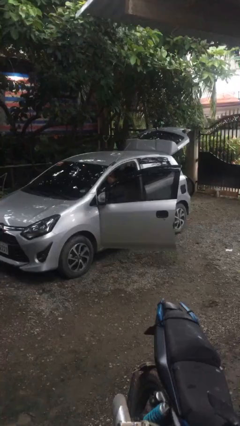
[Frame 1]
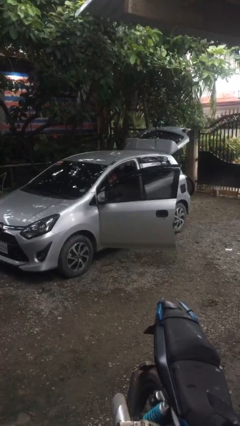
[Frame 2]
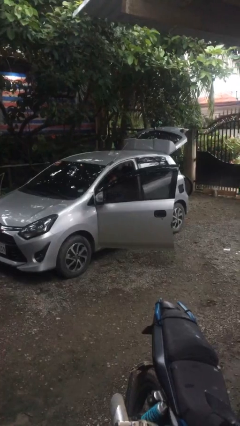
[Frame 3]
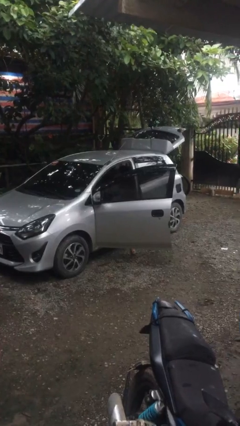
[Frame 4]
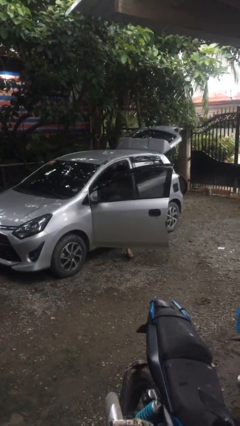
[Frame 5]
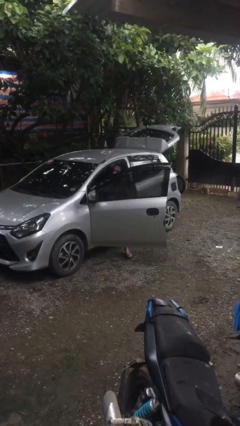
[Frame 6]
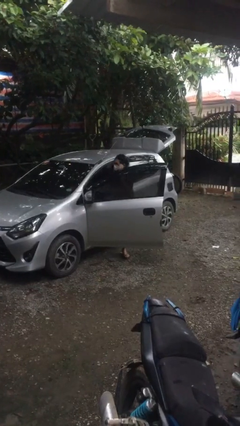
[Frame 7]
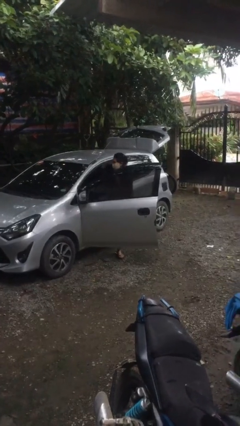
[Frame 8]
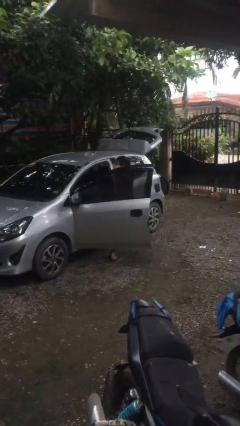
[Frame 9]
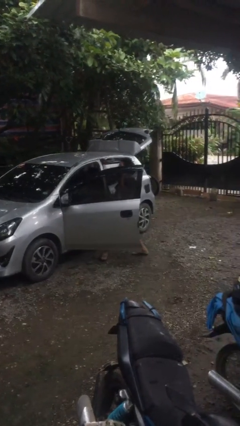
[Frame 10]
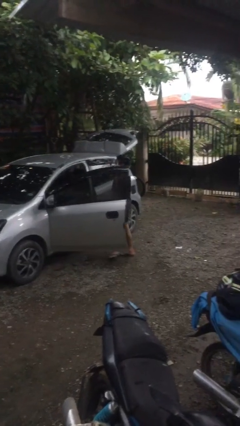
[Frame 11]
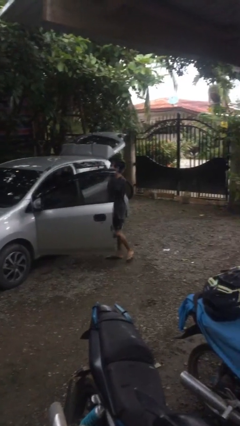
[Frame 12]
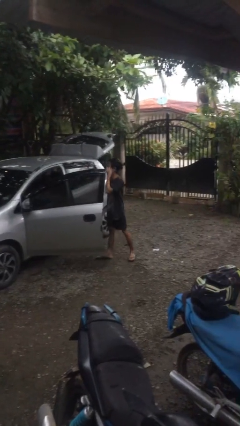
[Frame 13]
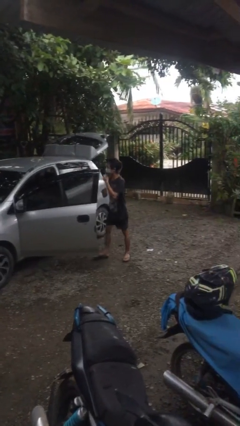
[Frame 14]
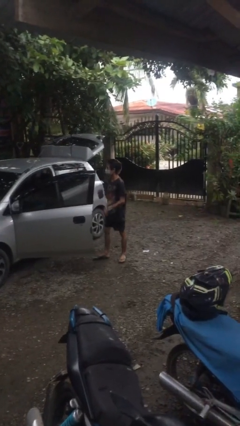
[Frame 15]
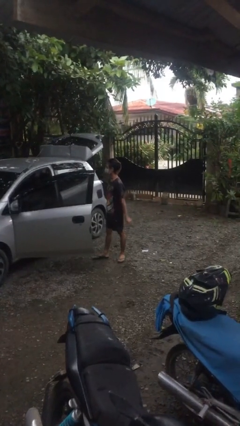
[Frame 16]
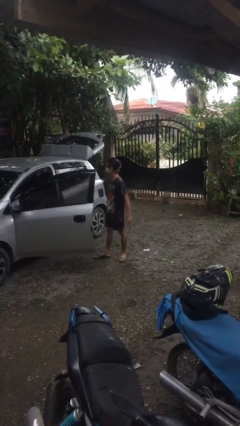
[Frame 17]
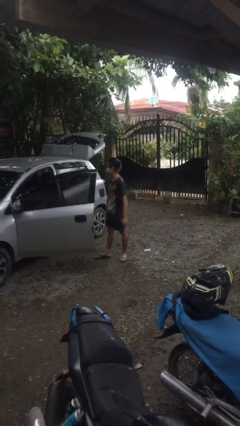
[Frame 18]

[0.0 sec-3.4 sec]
person exits car

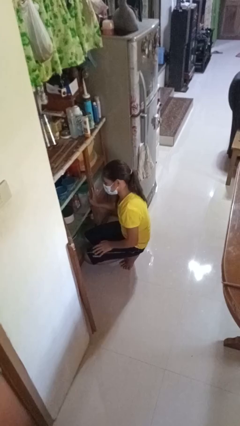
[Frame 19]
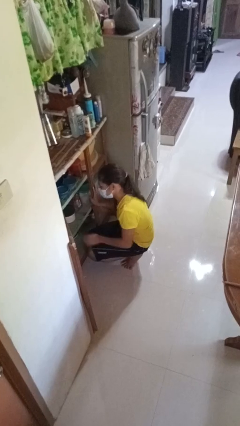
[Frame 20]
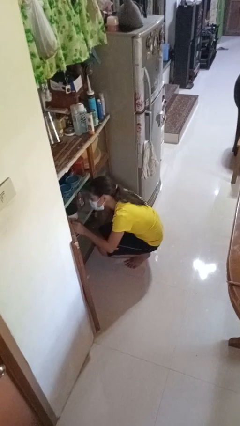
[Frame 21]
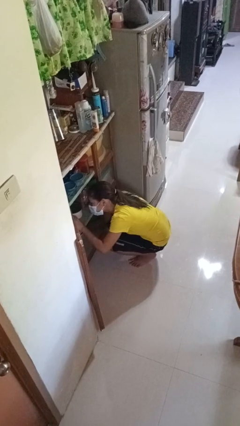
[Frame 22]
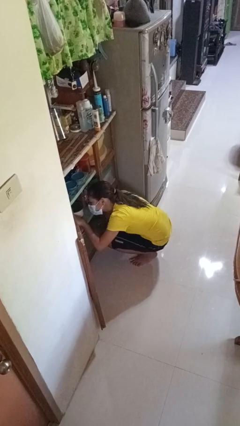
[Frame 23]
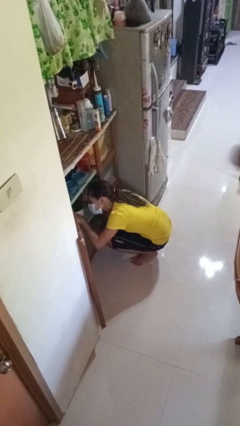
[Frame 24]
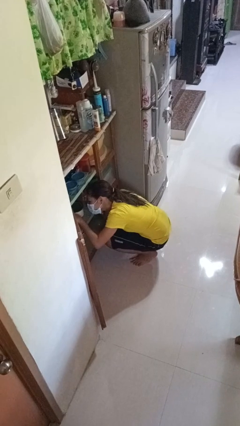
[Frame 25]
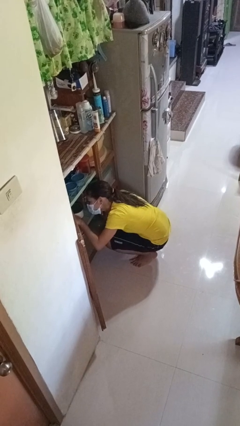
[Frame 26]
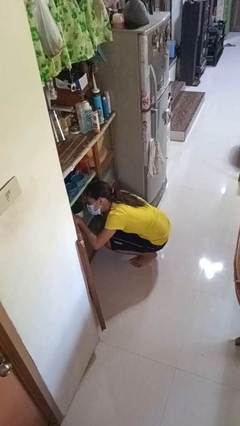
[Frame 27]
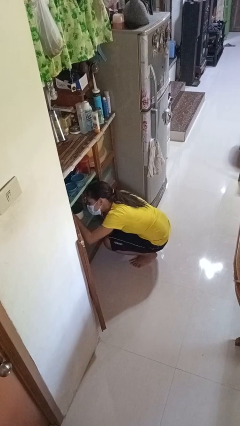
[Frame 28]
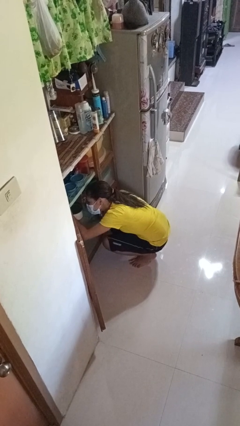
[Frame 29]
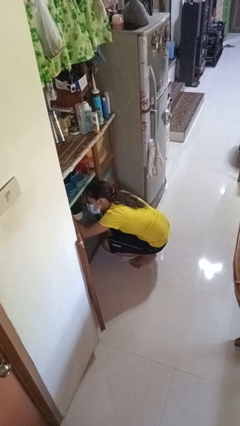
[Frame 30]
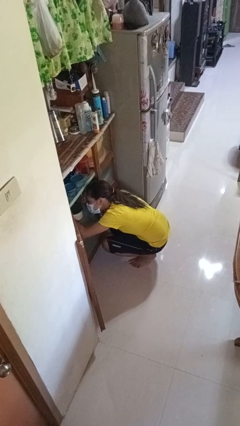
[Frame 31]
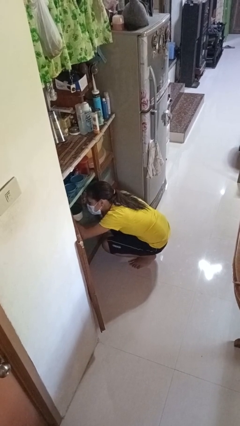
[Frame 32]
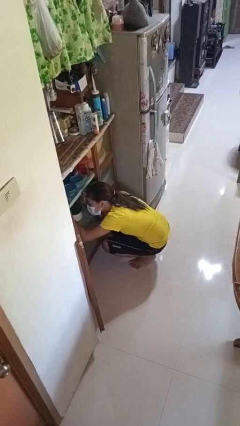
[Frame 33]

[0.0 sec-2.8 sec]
person searches in cabinet

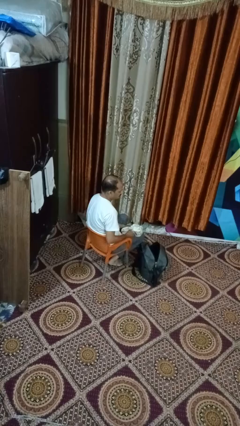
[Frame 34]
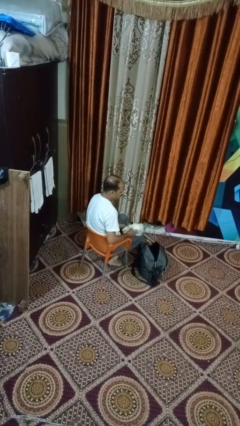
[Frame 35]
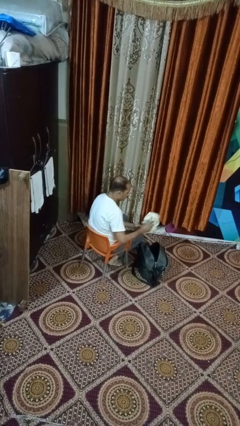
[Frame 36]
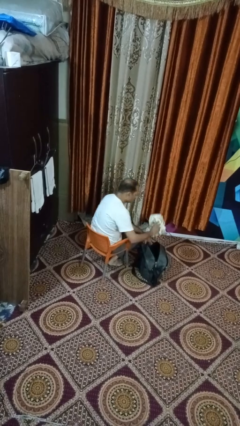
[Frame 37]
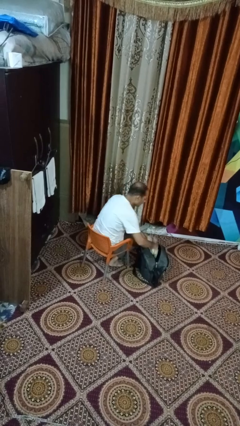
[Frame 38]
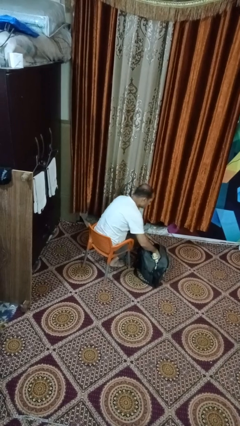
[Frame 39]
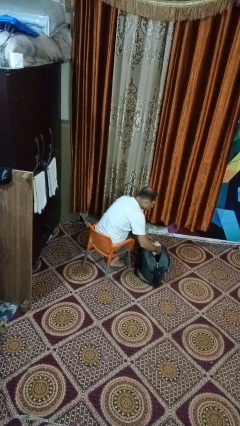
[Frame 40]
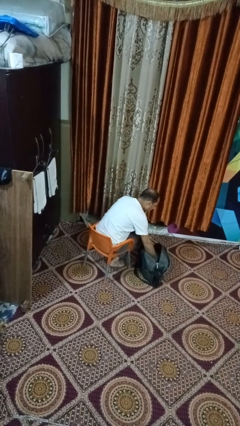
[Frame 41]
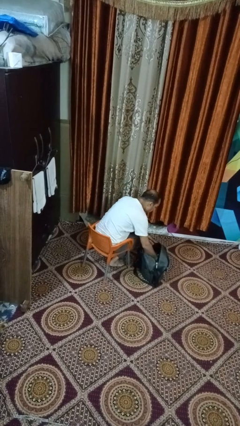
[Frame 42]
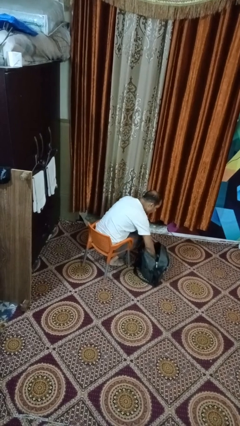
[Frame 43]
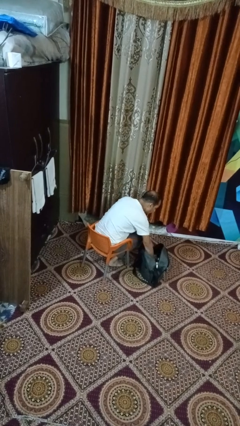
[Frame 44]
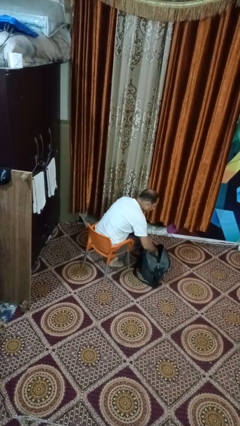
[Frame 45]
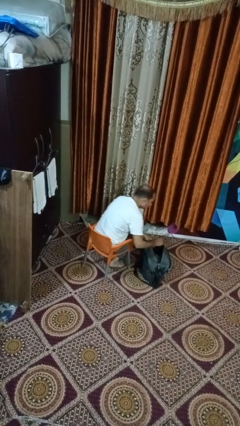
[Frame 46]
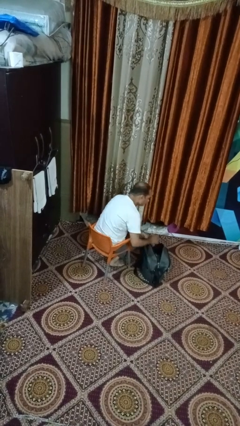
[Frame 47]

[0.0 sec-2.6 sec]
person puts object into backpack

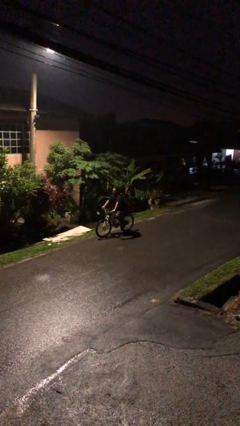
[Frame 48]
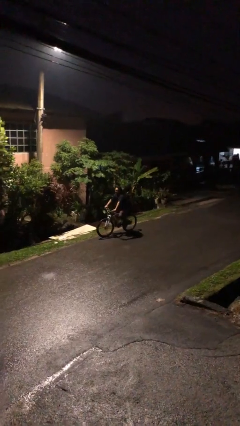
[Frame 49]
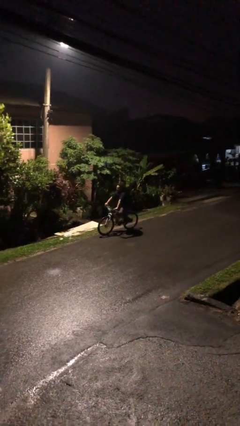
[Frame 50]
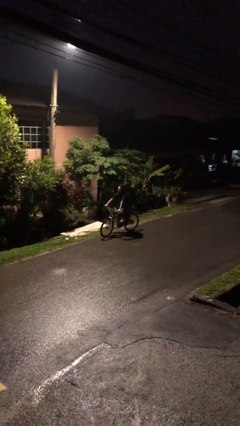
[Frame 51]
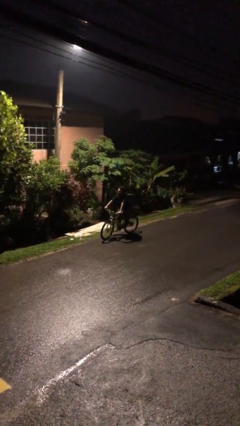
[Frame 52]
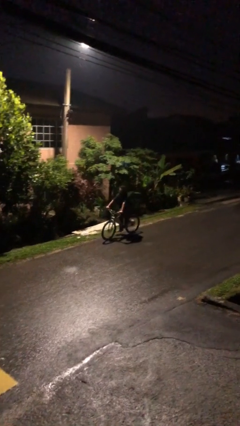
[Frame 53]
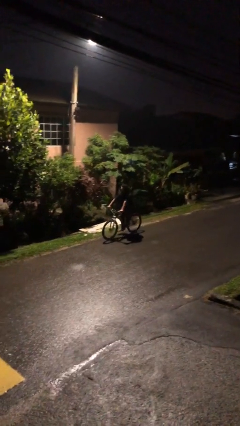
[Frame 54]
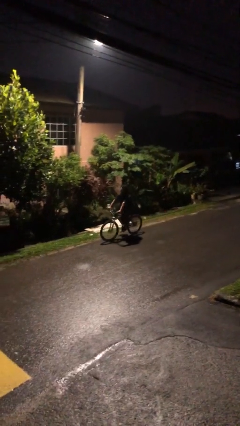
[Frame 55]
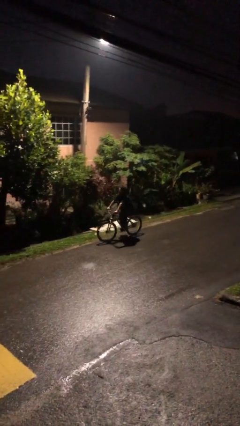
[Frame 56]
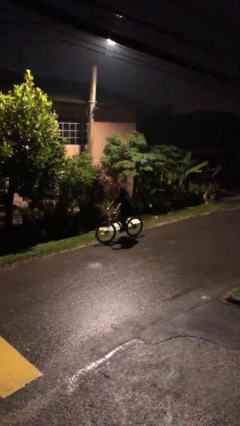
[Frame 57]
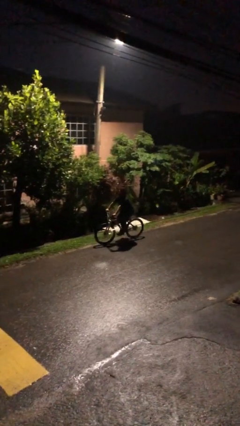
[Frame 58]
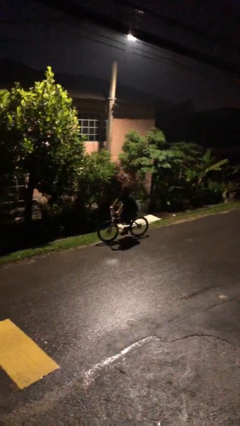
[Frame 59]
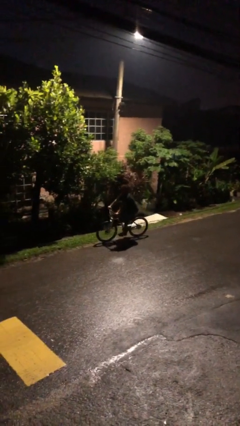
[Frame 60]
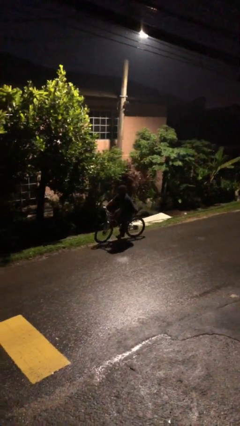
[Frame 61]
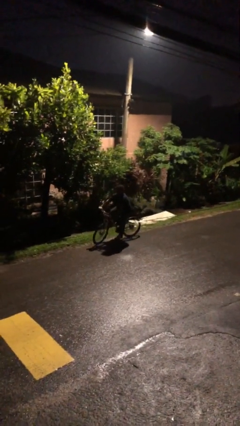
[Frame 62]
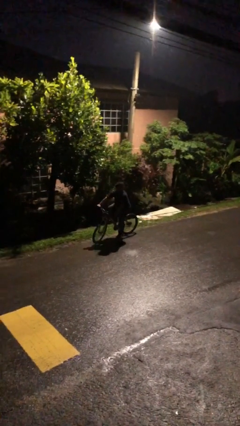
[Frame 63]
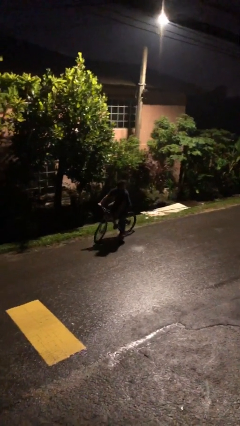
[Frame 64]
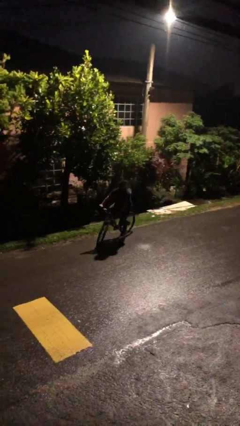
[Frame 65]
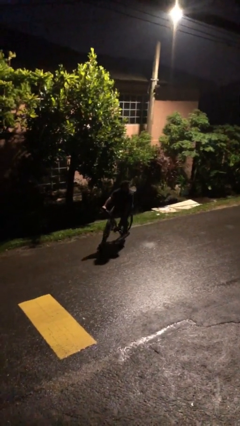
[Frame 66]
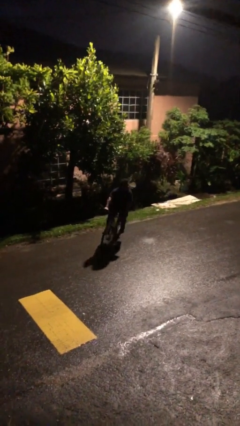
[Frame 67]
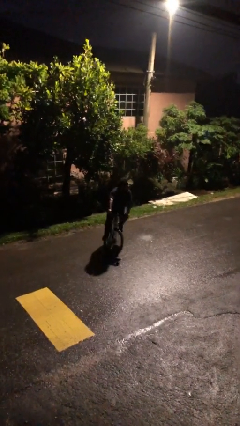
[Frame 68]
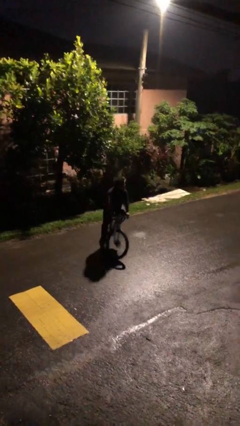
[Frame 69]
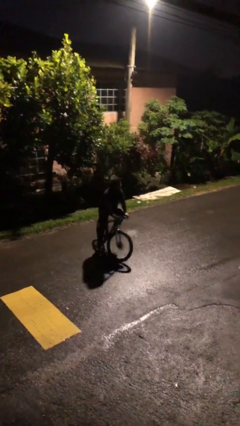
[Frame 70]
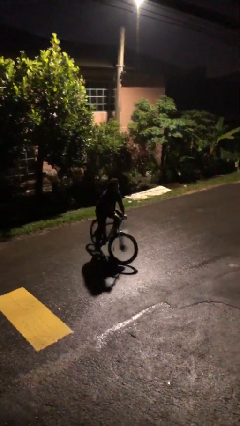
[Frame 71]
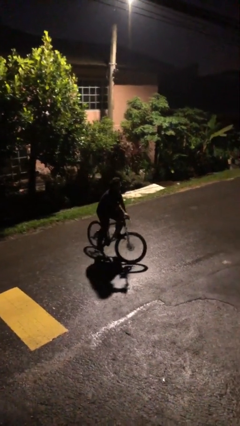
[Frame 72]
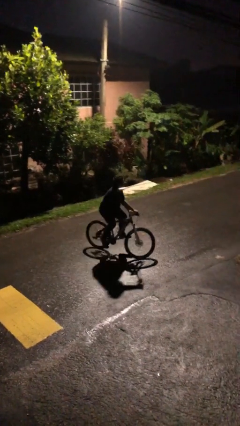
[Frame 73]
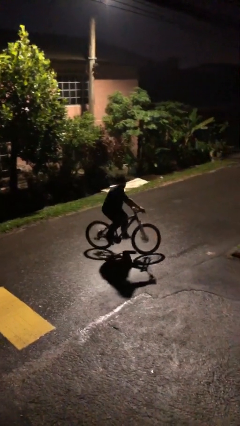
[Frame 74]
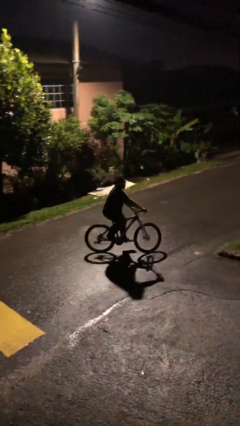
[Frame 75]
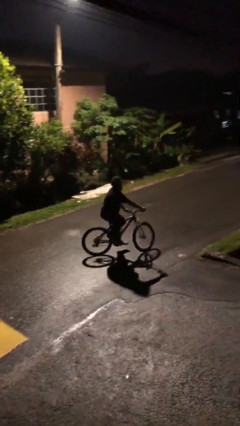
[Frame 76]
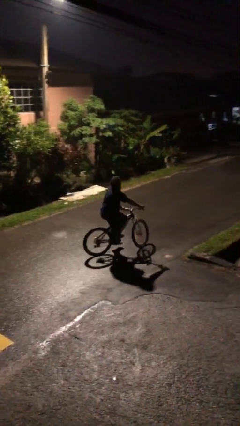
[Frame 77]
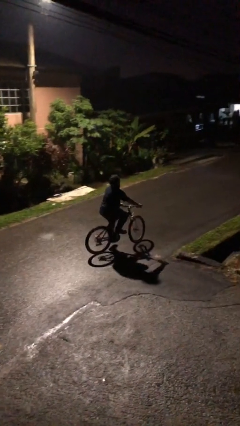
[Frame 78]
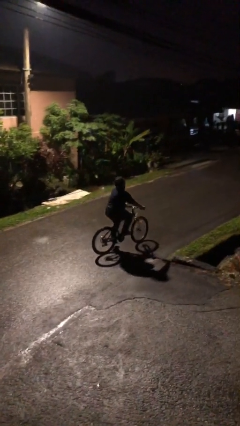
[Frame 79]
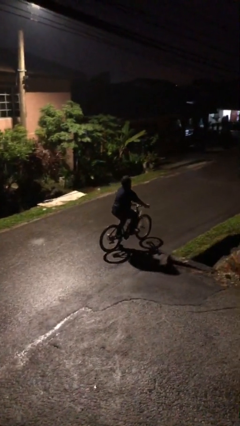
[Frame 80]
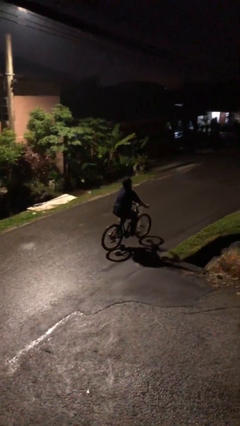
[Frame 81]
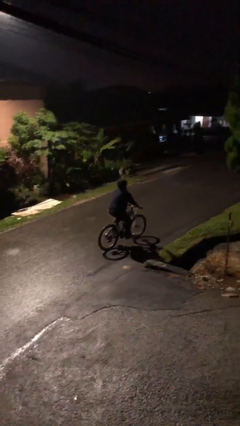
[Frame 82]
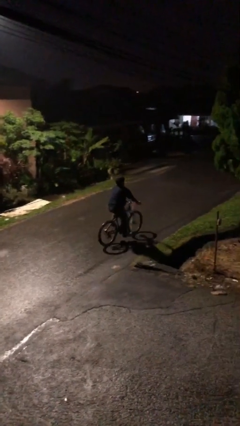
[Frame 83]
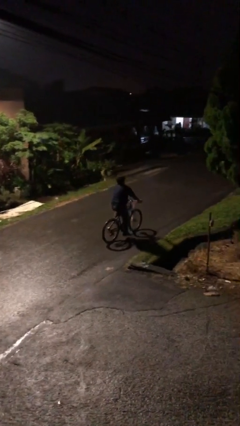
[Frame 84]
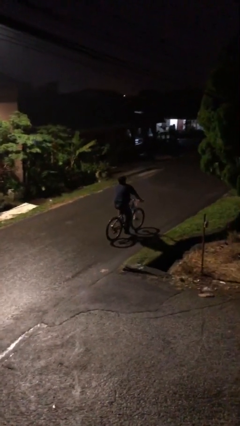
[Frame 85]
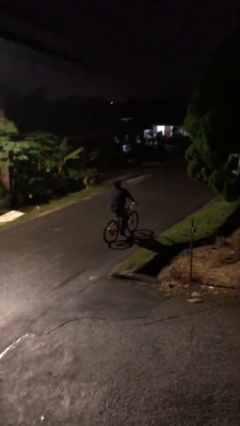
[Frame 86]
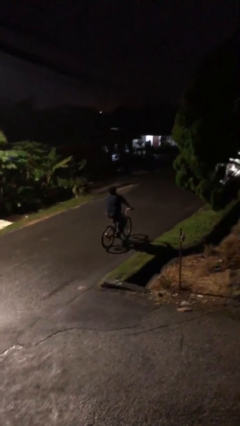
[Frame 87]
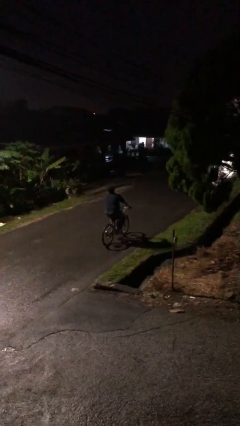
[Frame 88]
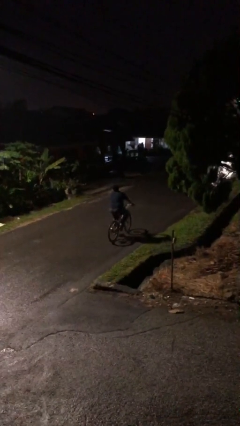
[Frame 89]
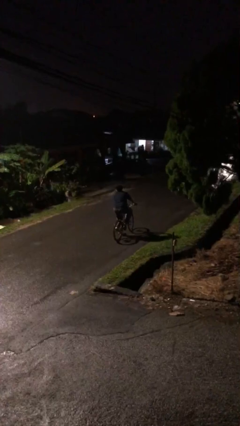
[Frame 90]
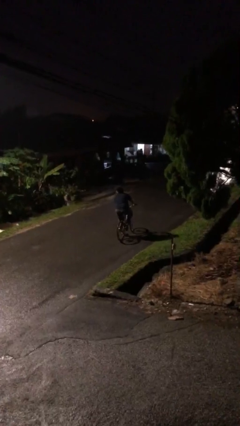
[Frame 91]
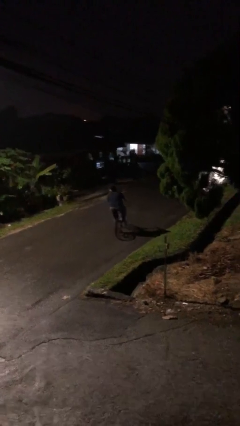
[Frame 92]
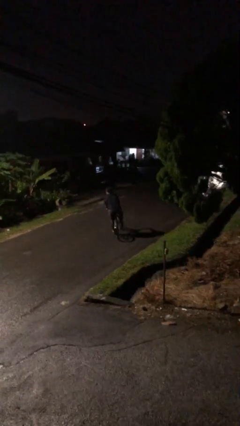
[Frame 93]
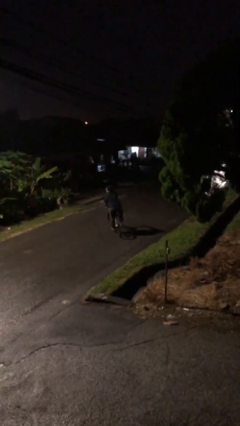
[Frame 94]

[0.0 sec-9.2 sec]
person rides bicycle
